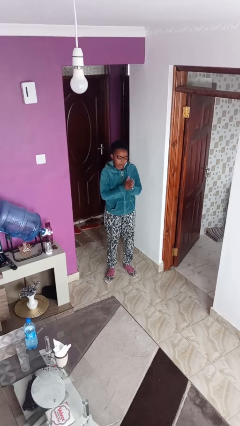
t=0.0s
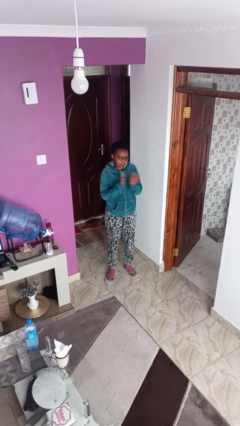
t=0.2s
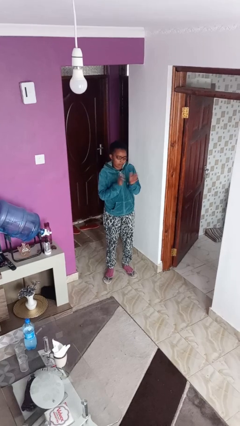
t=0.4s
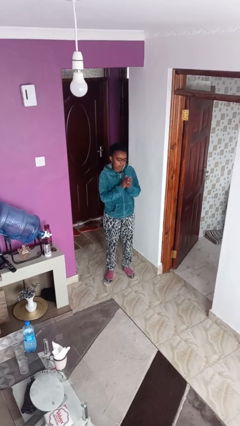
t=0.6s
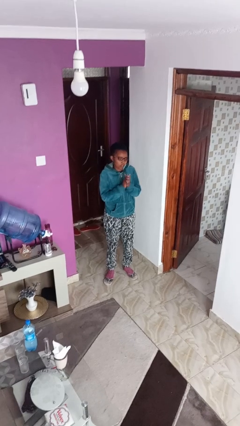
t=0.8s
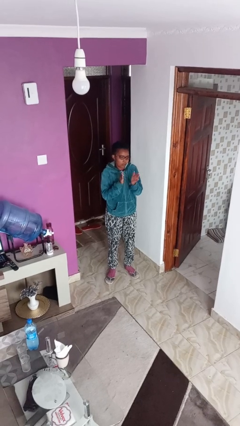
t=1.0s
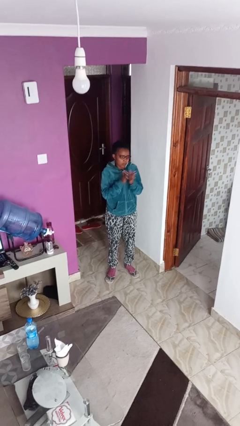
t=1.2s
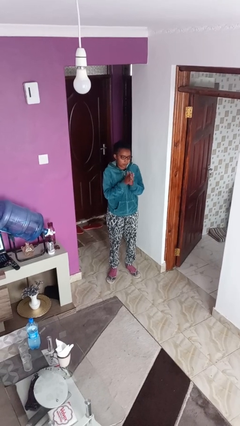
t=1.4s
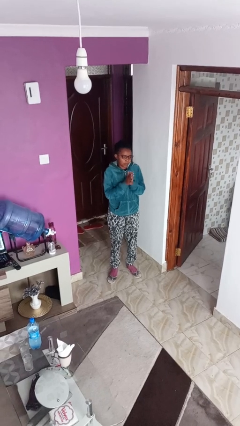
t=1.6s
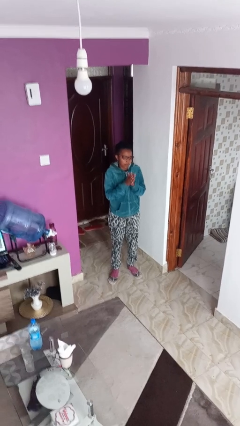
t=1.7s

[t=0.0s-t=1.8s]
person claps hands

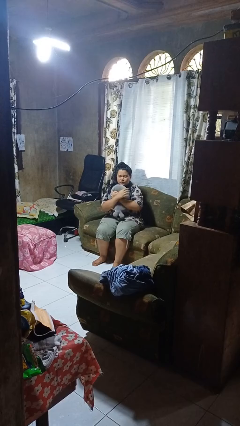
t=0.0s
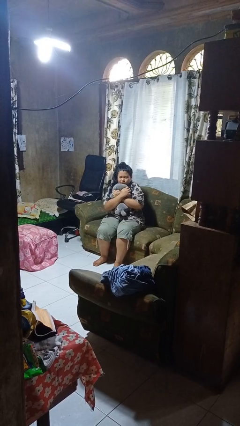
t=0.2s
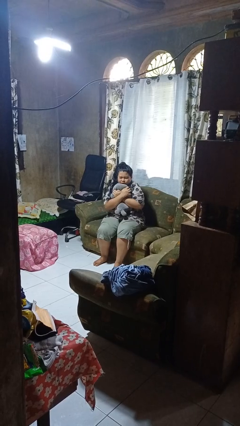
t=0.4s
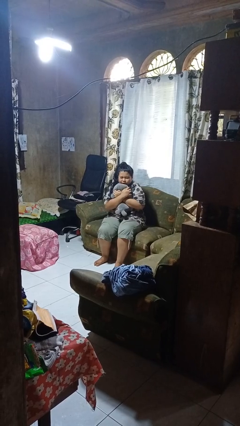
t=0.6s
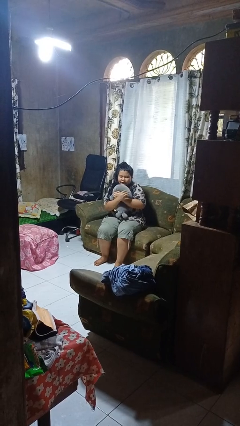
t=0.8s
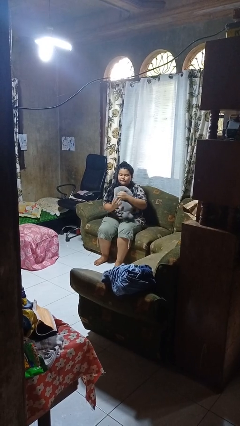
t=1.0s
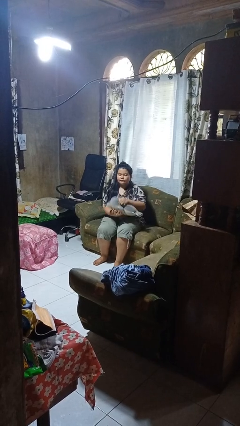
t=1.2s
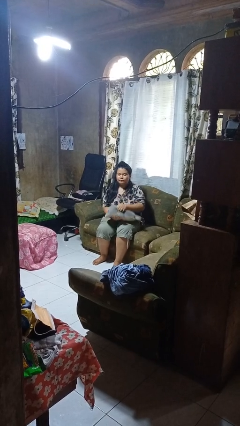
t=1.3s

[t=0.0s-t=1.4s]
person hugs stuffed animal

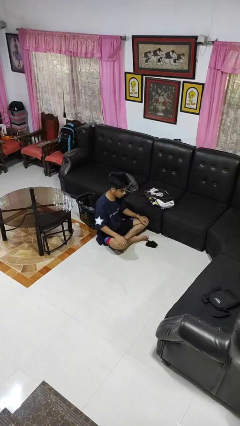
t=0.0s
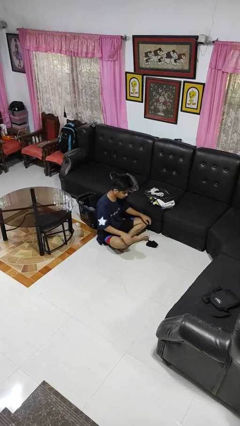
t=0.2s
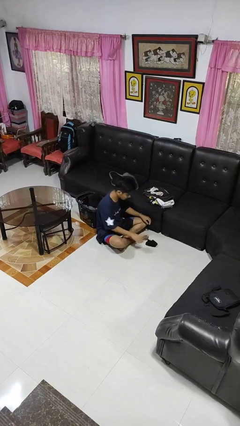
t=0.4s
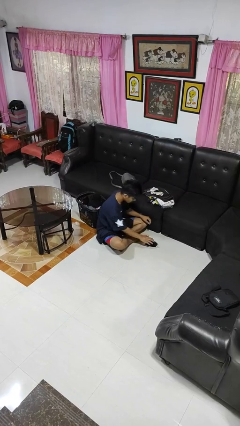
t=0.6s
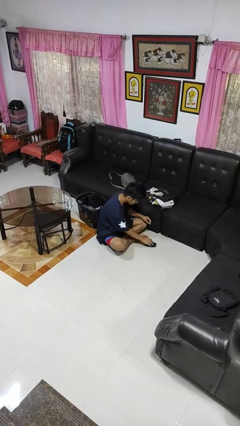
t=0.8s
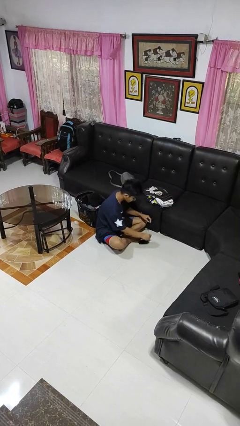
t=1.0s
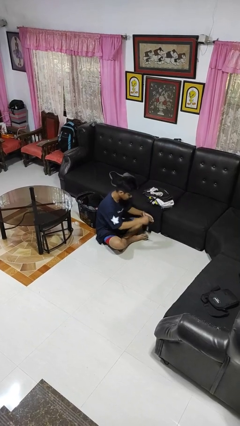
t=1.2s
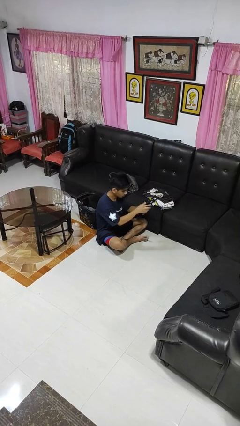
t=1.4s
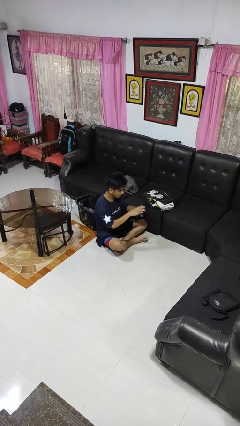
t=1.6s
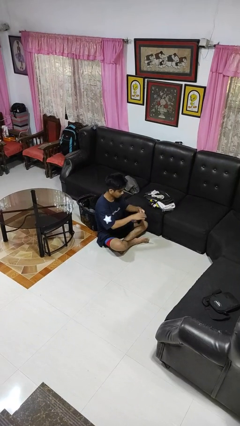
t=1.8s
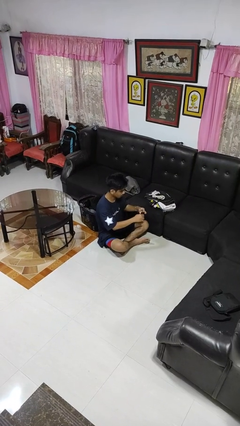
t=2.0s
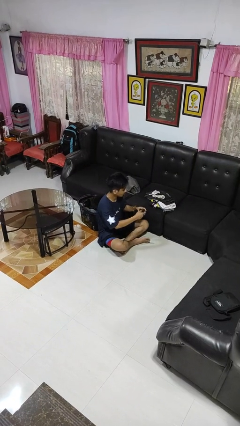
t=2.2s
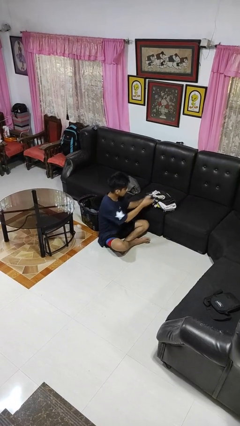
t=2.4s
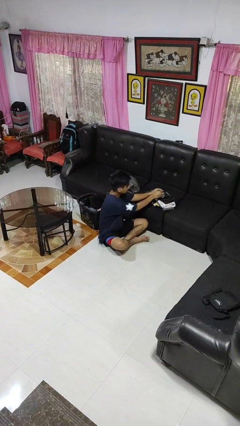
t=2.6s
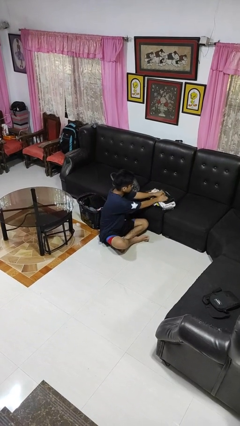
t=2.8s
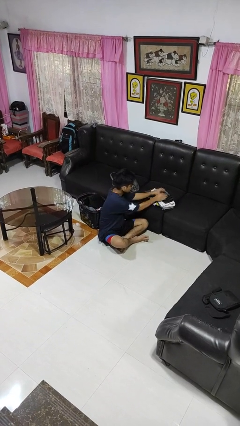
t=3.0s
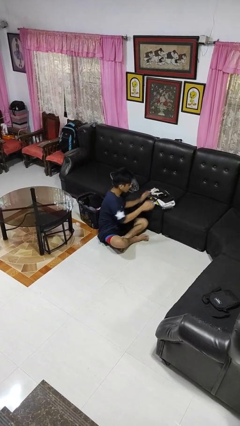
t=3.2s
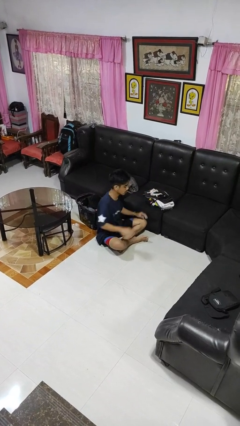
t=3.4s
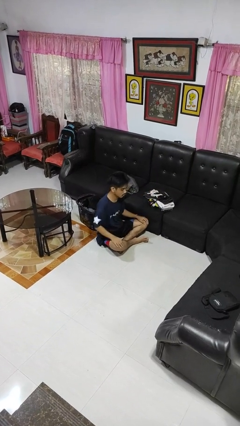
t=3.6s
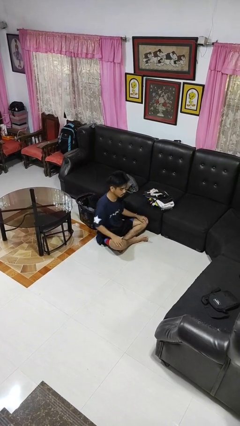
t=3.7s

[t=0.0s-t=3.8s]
person folds socks

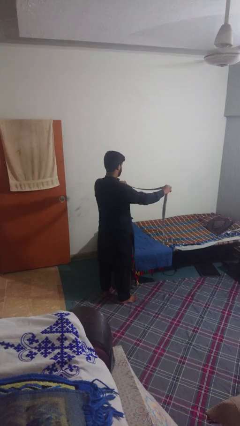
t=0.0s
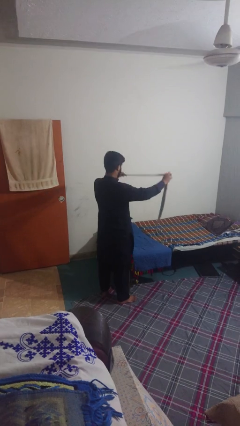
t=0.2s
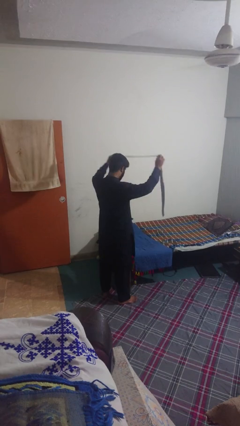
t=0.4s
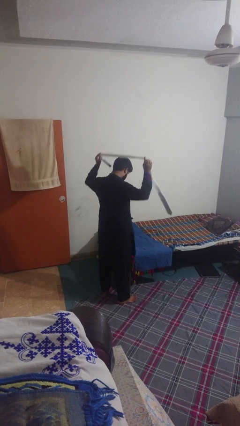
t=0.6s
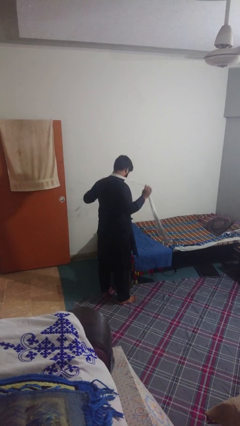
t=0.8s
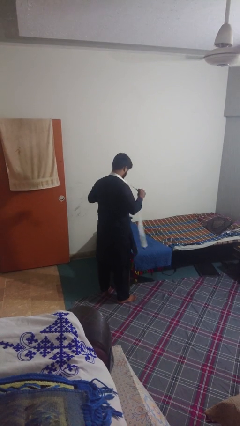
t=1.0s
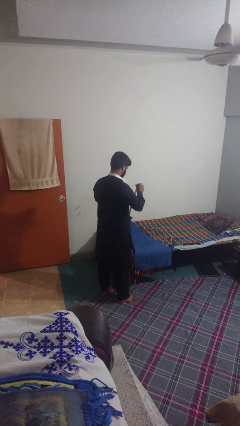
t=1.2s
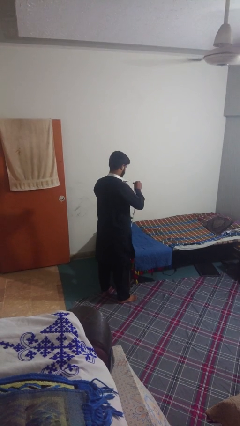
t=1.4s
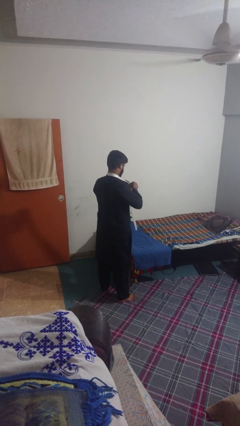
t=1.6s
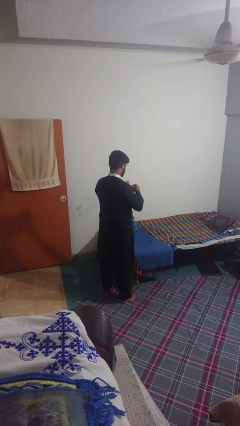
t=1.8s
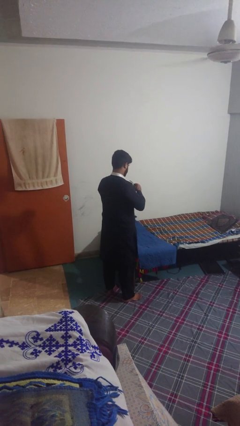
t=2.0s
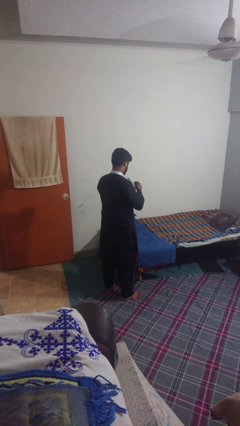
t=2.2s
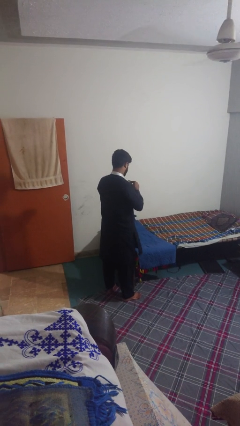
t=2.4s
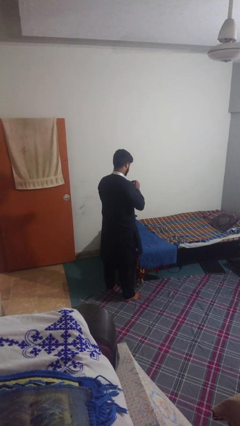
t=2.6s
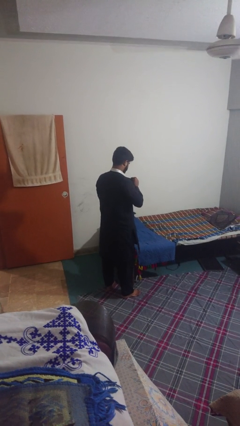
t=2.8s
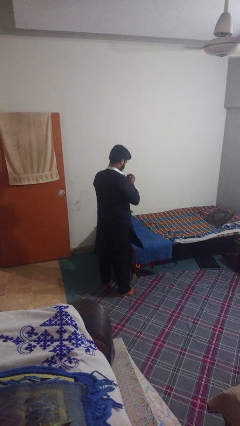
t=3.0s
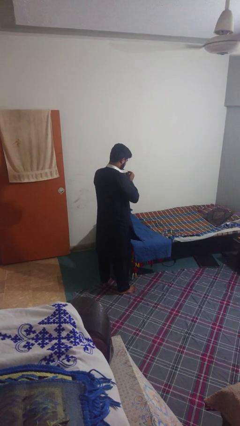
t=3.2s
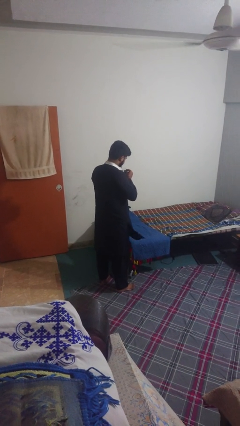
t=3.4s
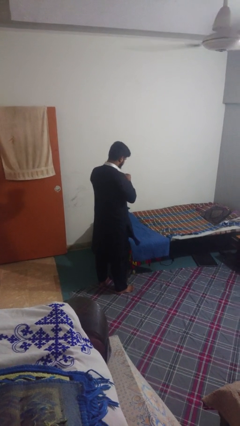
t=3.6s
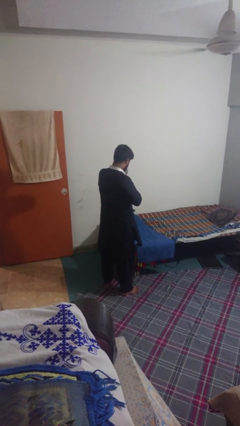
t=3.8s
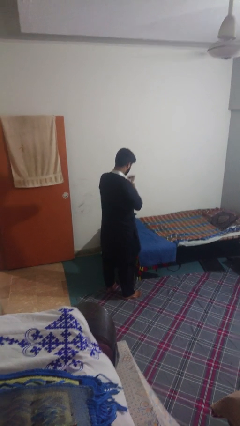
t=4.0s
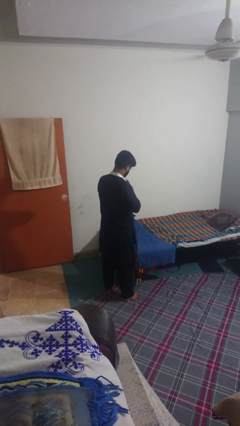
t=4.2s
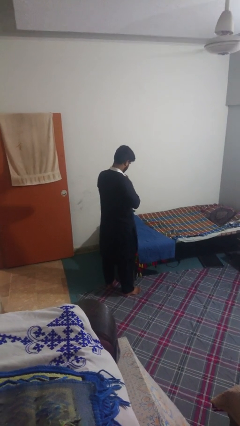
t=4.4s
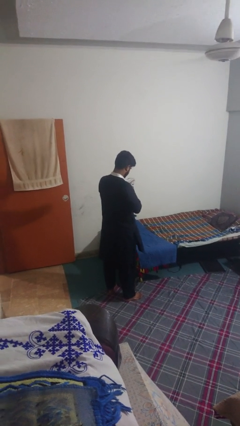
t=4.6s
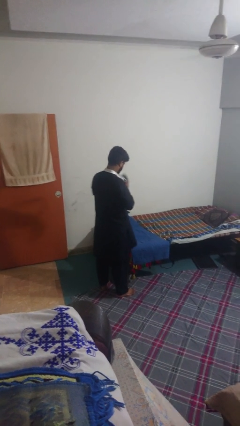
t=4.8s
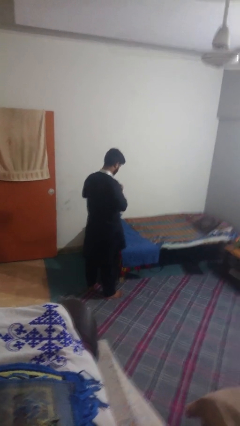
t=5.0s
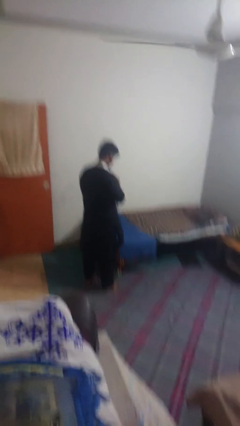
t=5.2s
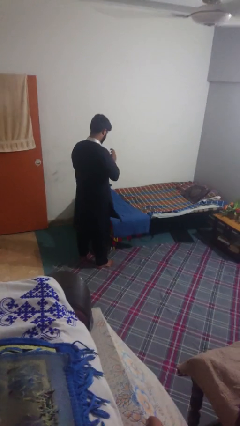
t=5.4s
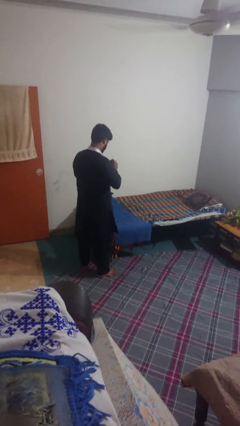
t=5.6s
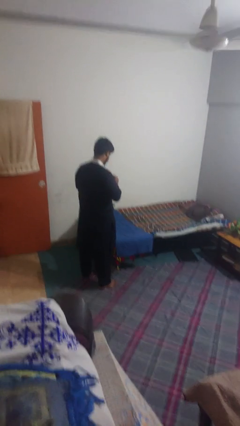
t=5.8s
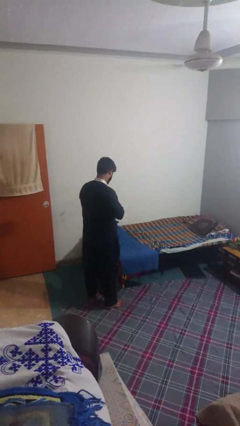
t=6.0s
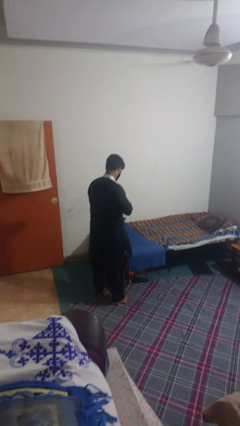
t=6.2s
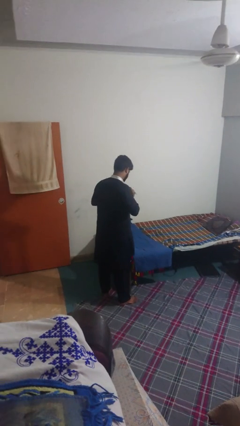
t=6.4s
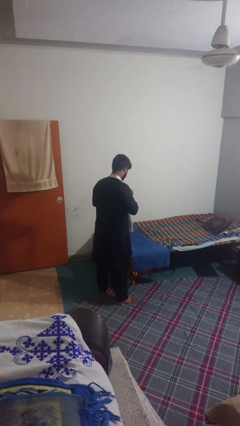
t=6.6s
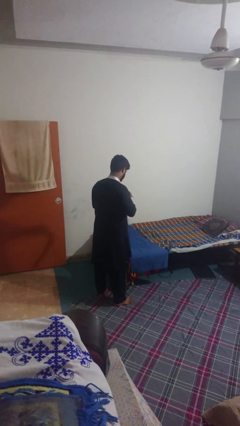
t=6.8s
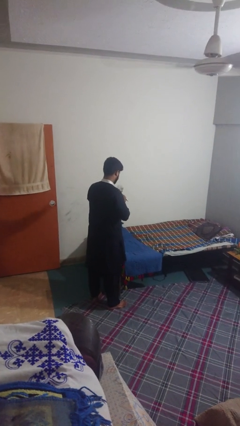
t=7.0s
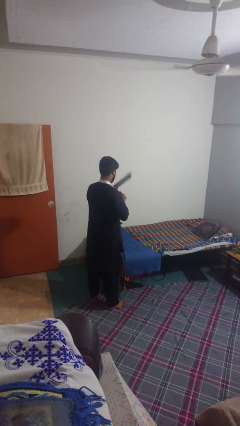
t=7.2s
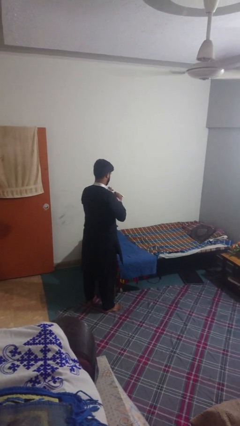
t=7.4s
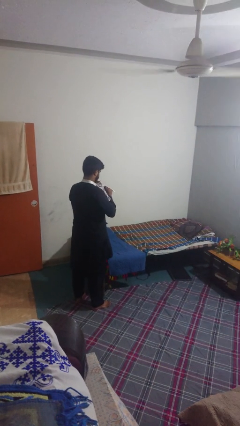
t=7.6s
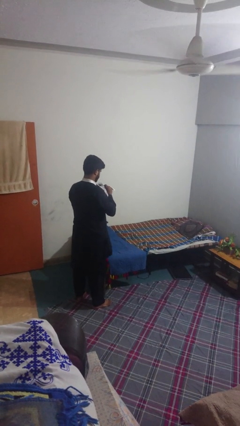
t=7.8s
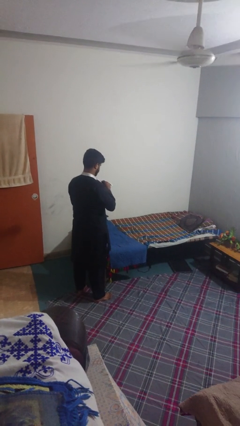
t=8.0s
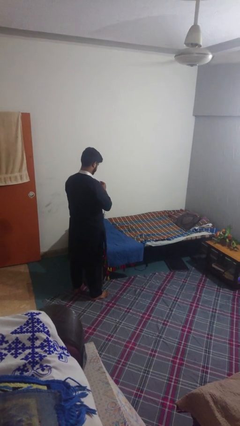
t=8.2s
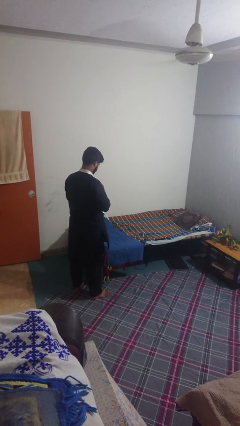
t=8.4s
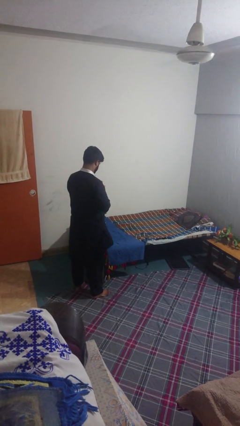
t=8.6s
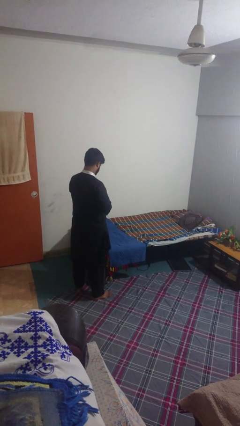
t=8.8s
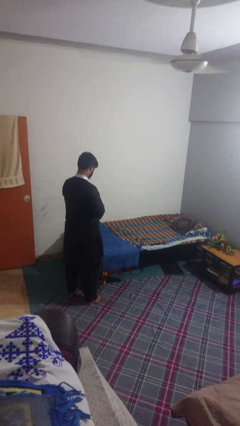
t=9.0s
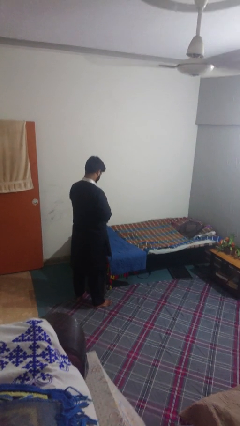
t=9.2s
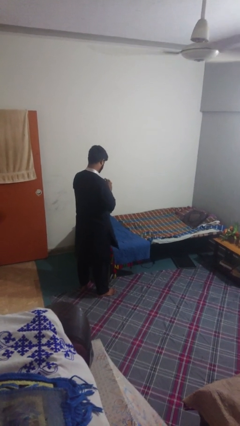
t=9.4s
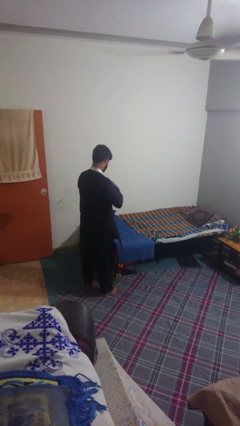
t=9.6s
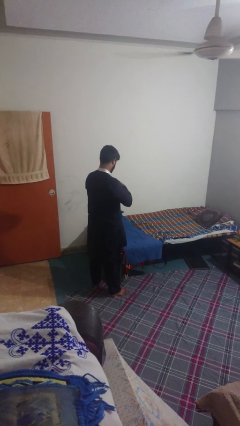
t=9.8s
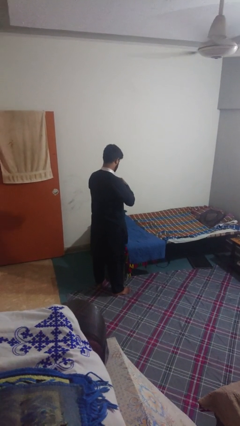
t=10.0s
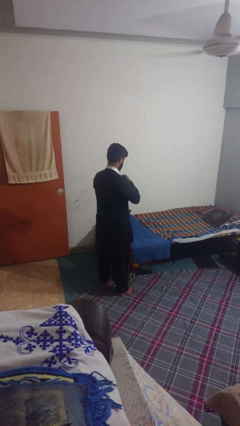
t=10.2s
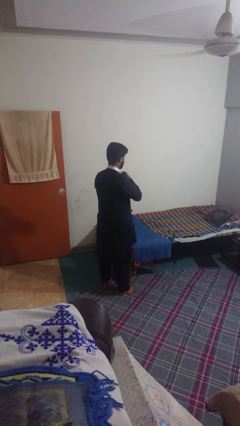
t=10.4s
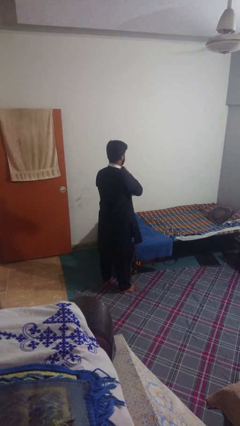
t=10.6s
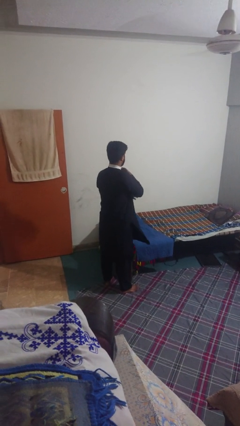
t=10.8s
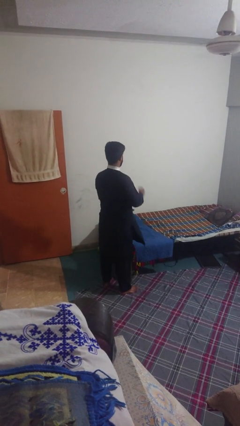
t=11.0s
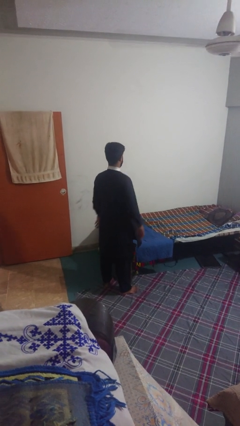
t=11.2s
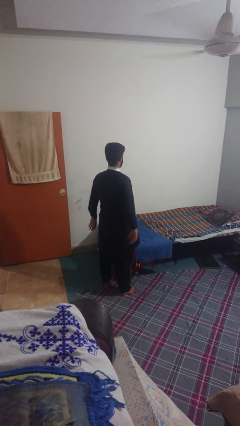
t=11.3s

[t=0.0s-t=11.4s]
person puts on necktie
